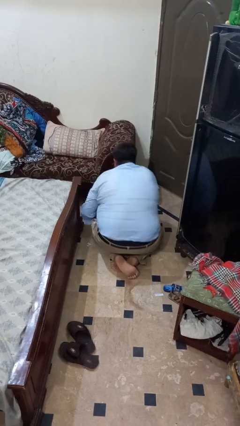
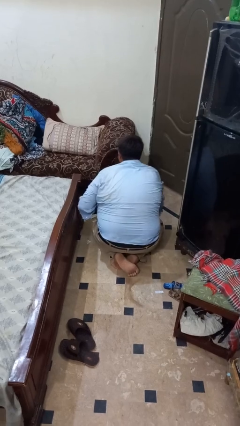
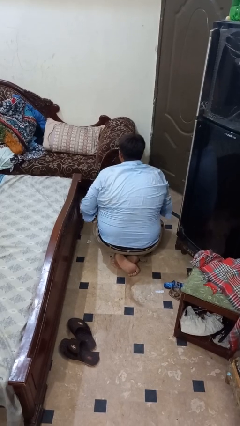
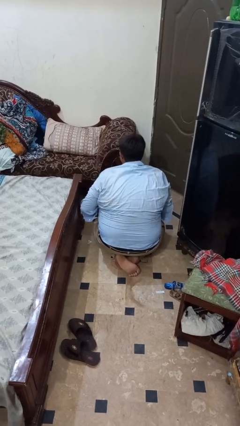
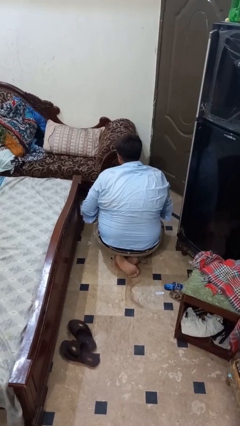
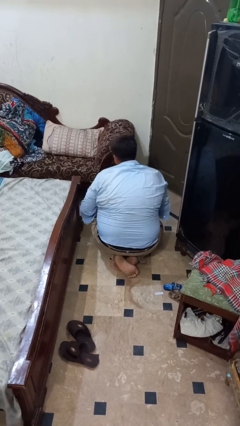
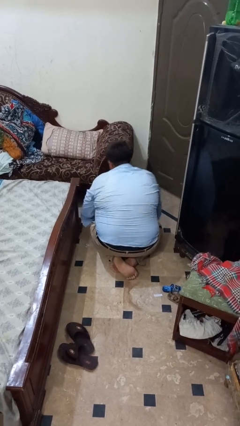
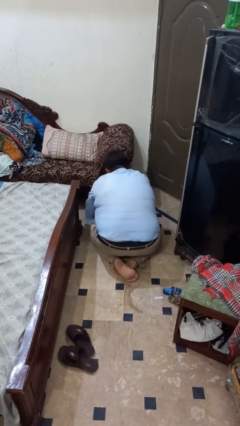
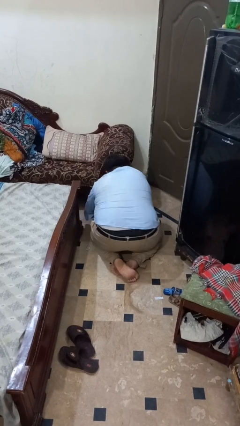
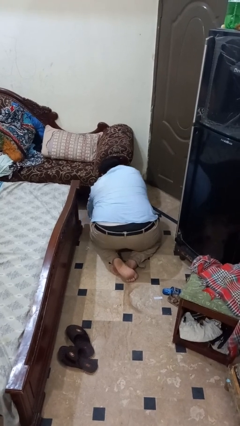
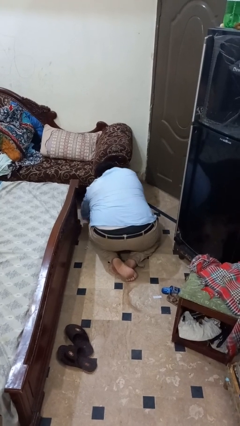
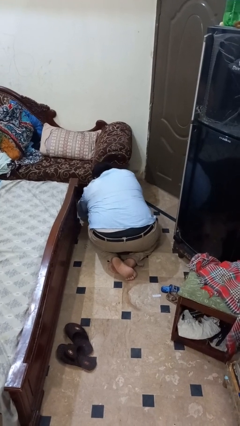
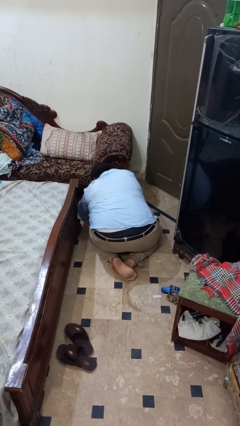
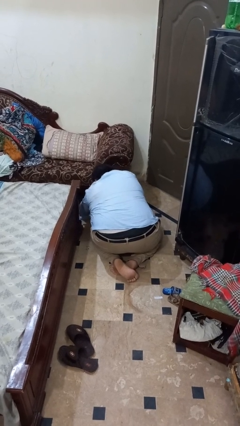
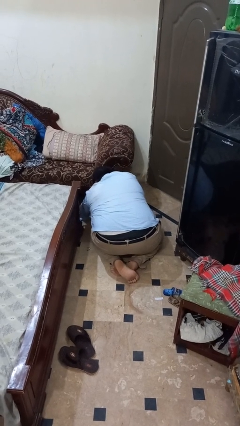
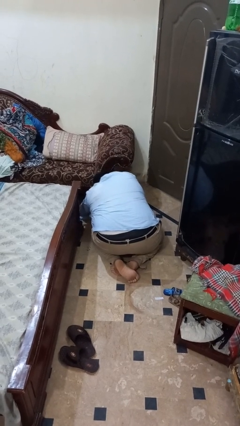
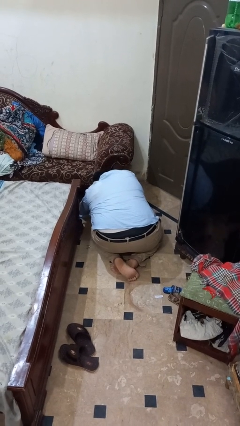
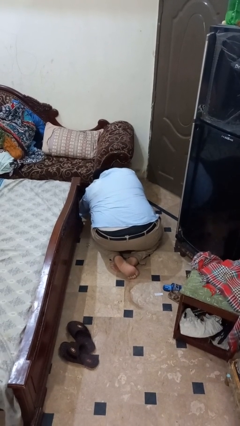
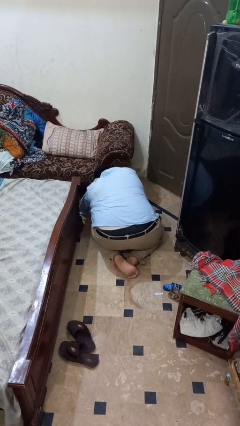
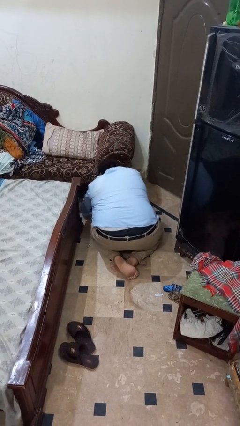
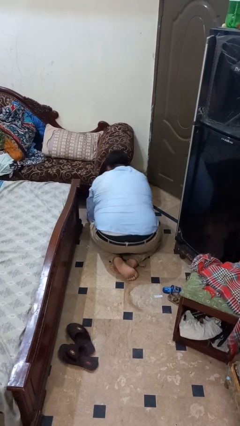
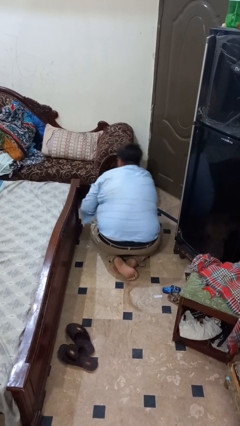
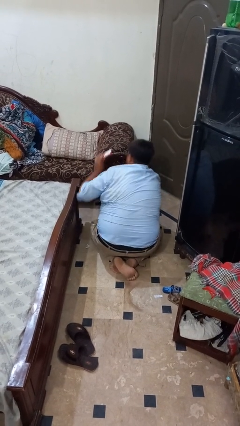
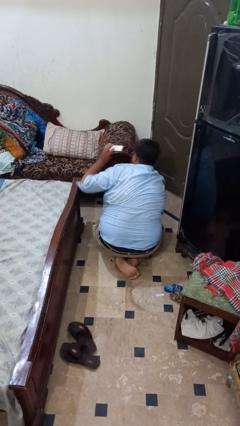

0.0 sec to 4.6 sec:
person searches under couch

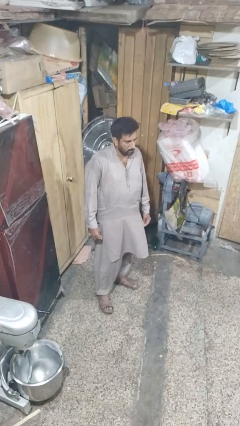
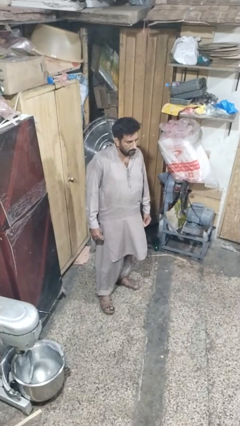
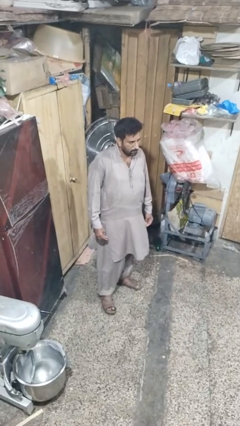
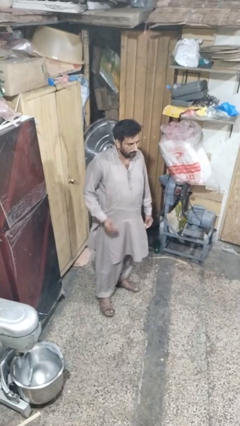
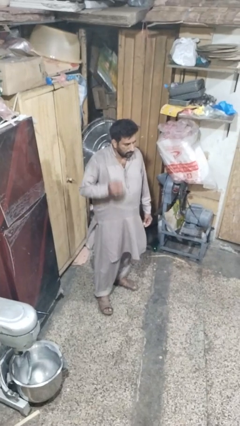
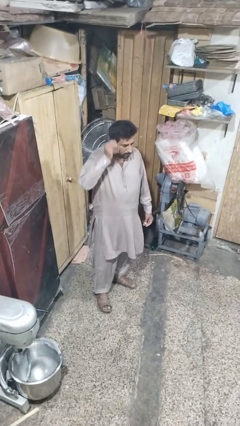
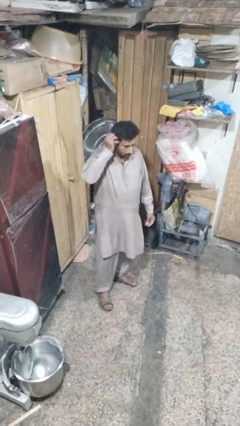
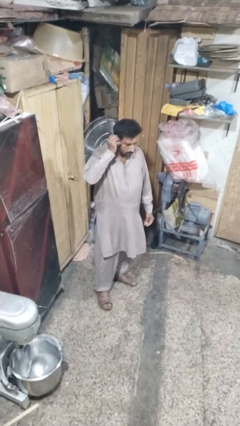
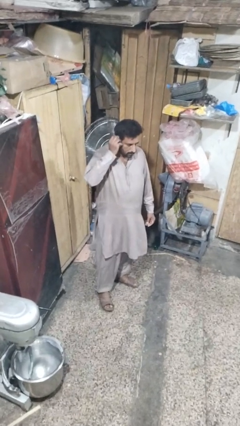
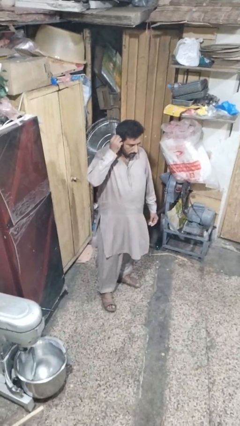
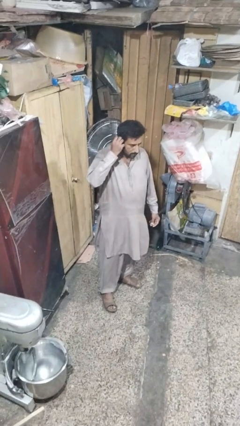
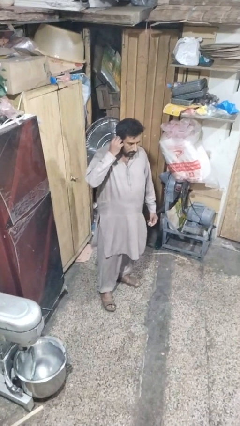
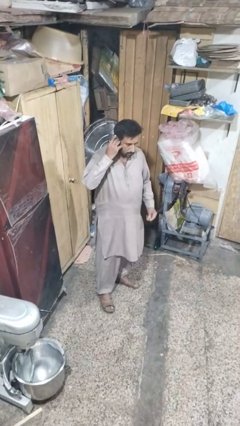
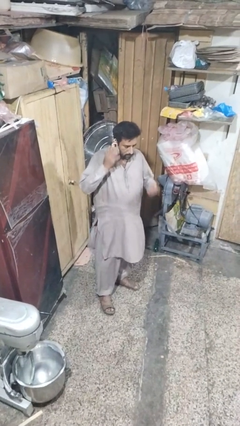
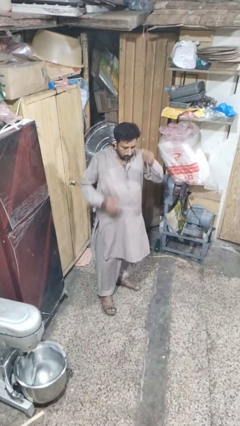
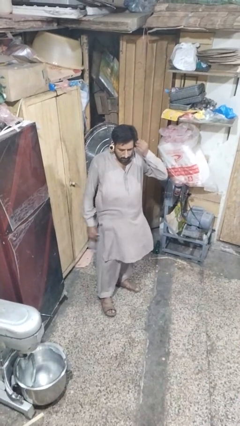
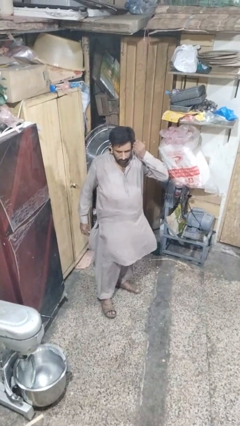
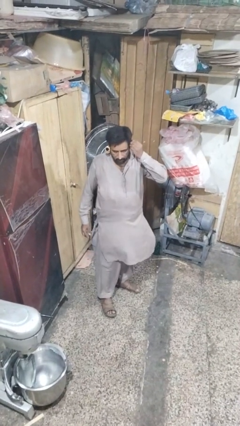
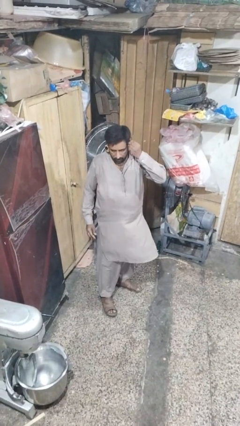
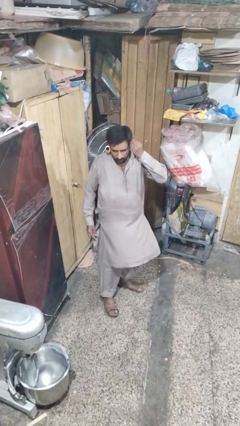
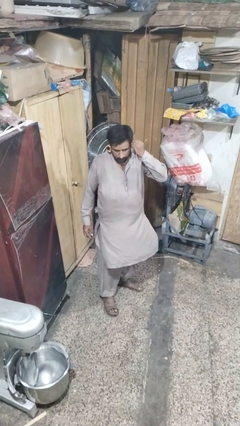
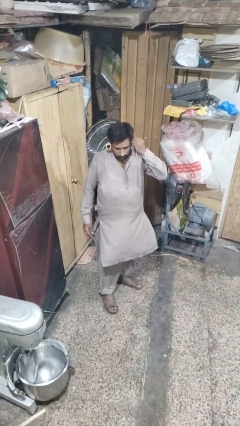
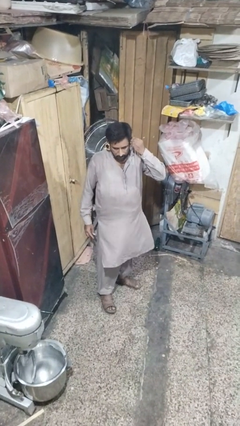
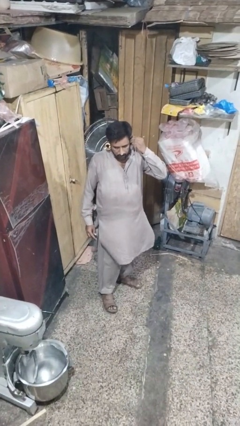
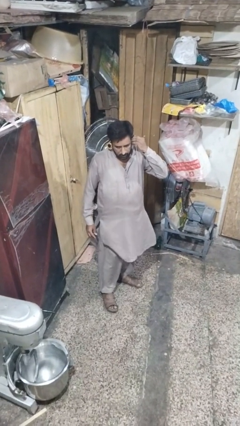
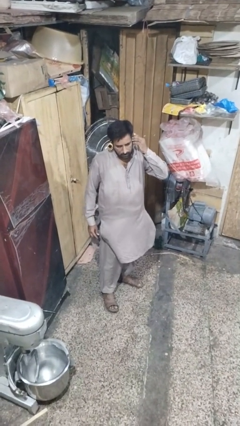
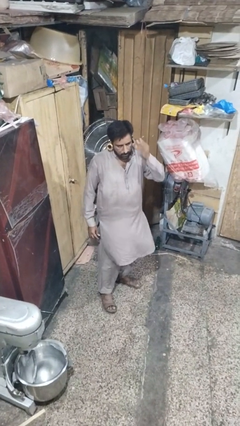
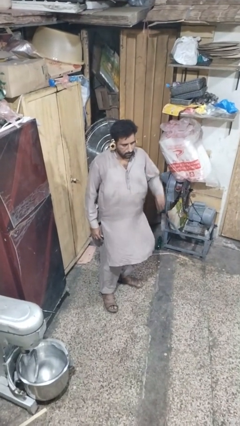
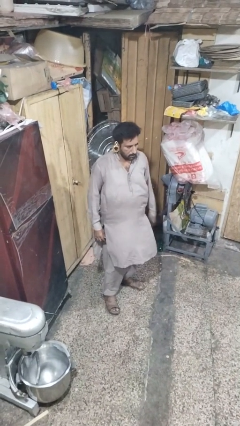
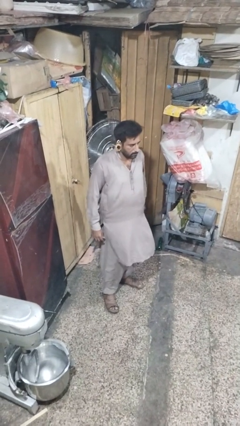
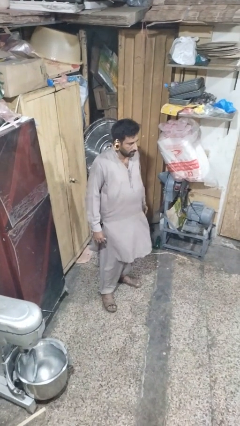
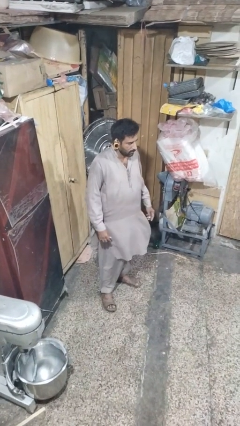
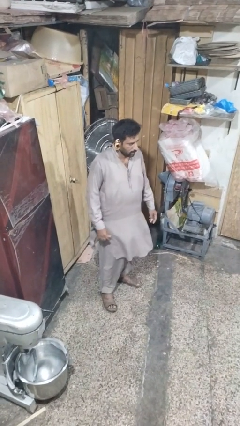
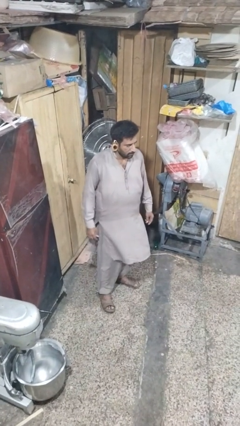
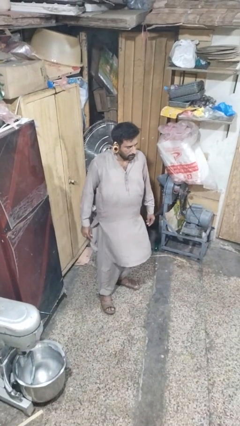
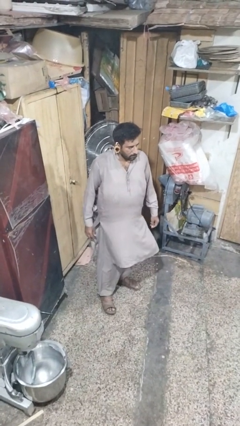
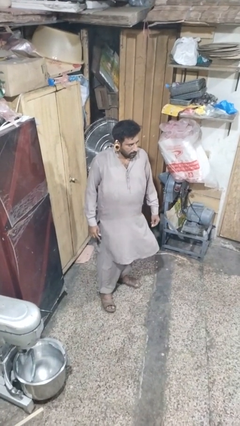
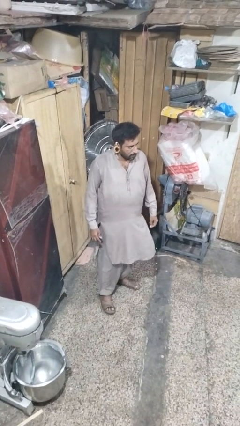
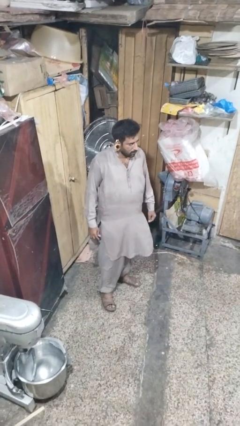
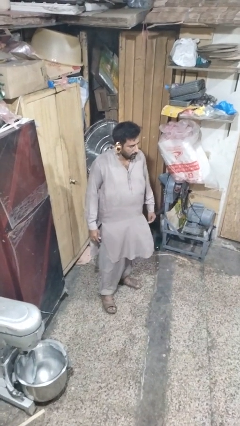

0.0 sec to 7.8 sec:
person puts on earrings

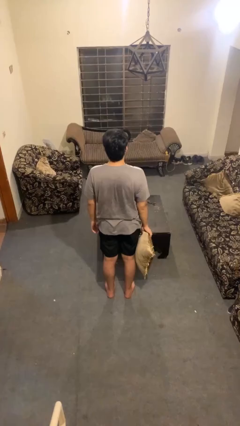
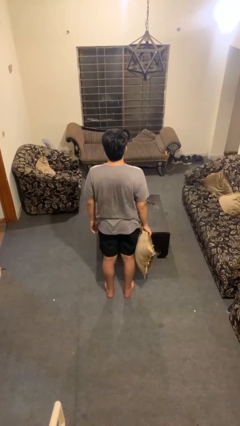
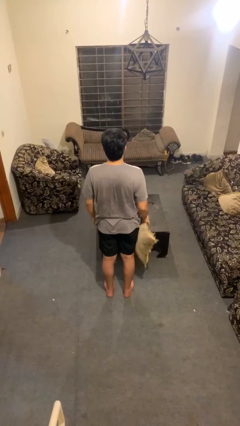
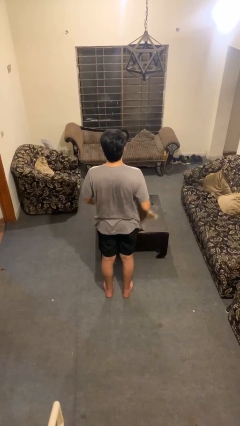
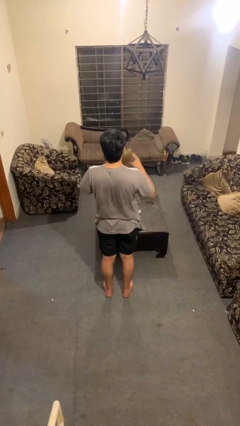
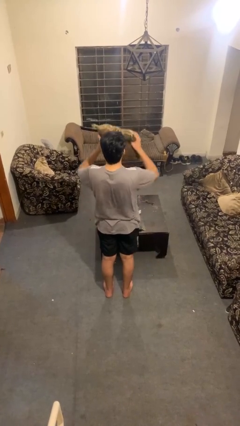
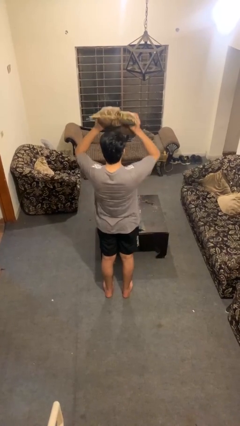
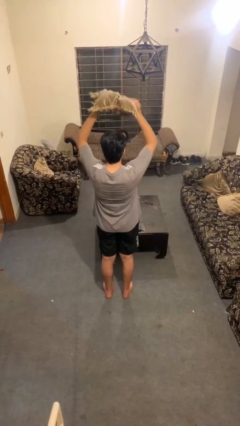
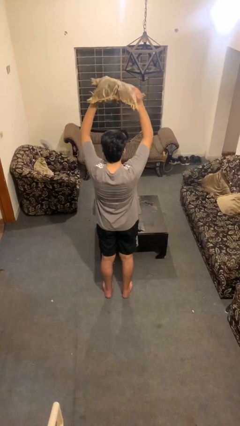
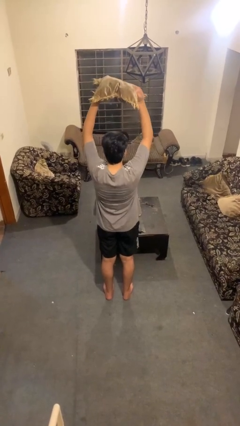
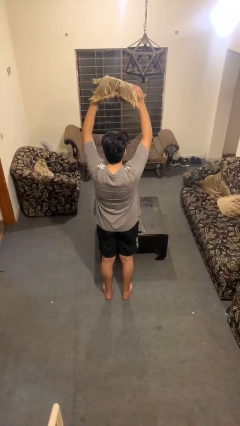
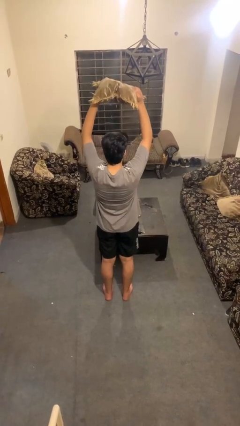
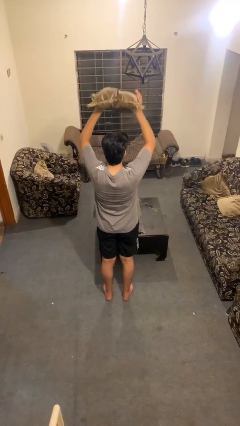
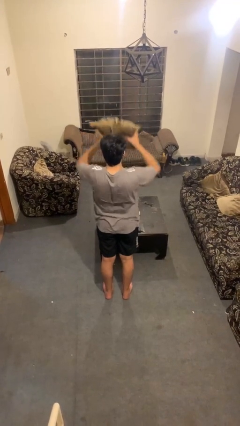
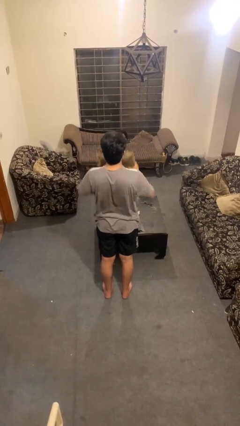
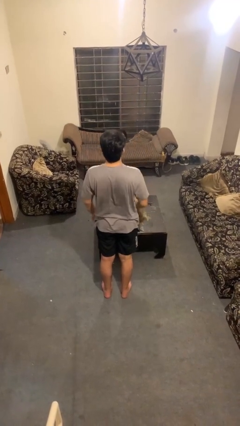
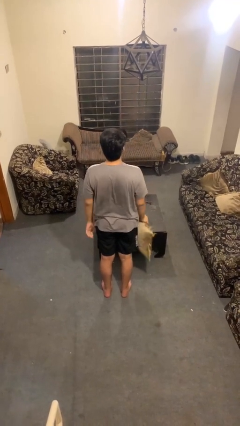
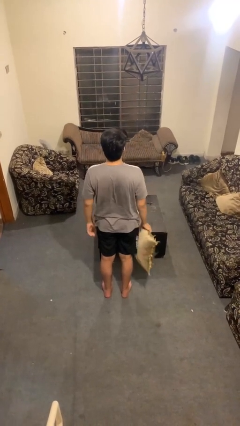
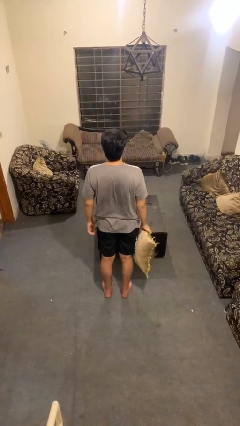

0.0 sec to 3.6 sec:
person holds object above head

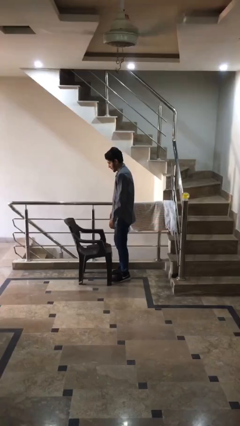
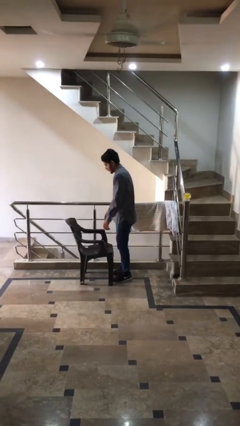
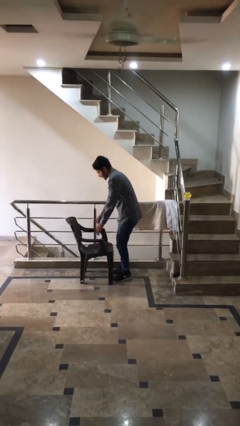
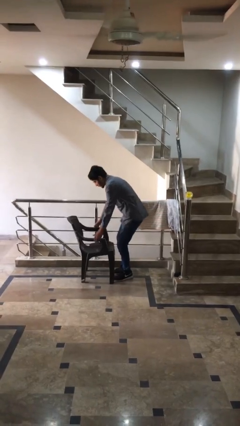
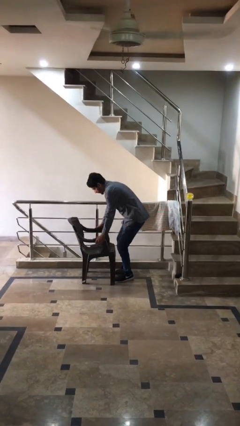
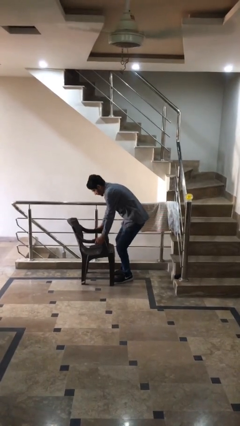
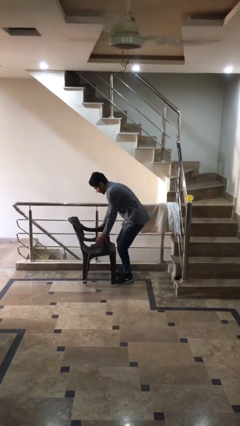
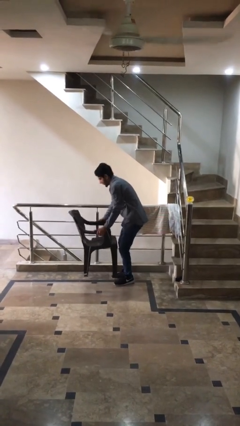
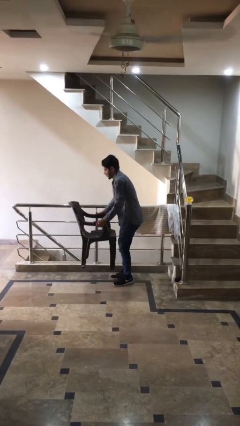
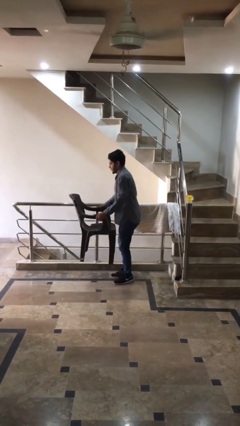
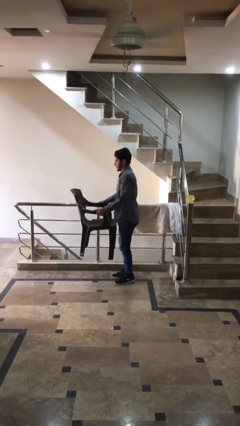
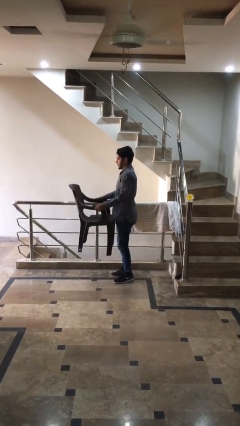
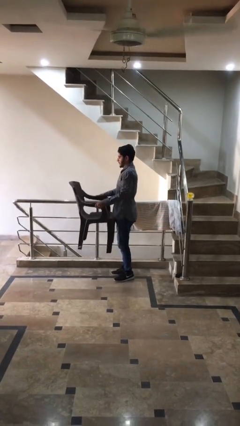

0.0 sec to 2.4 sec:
person picks up object from floor
